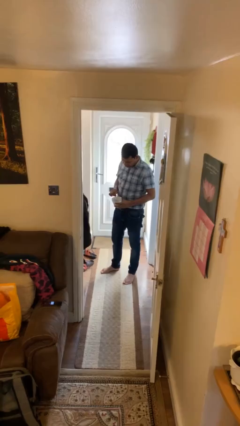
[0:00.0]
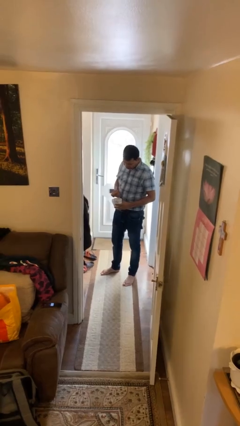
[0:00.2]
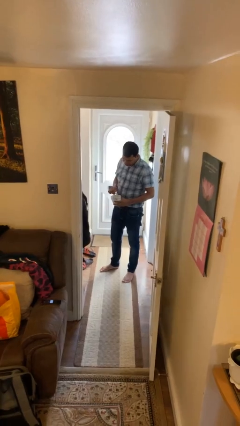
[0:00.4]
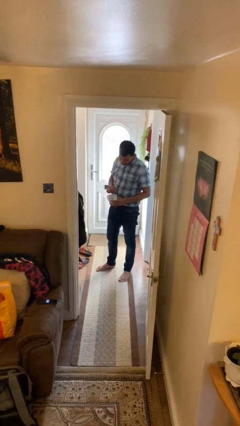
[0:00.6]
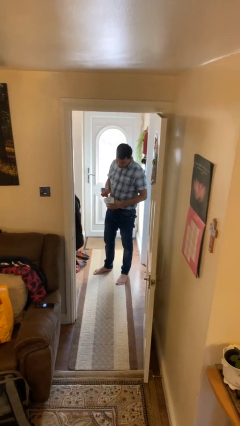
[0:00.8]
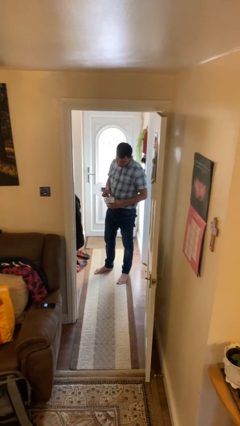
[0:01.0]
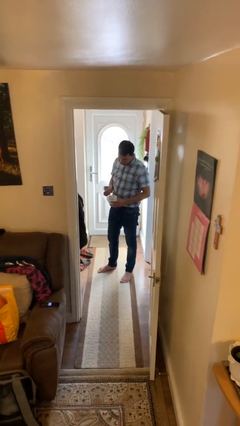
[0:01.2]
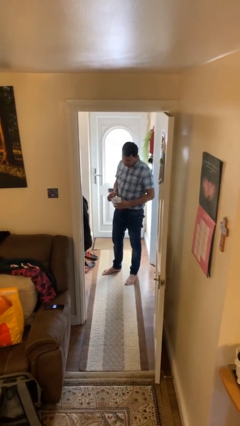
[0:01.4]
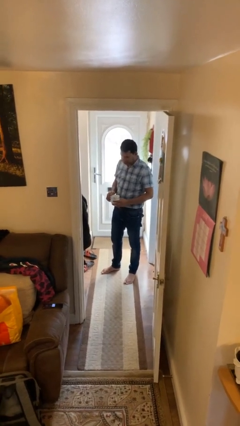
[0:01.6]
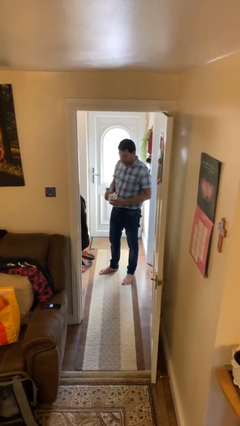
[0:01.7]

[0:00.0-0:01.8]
person stirs mug

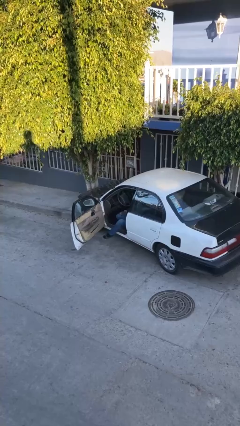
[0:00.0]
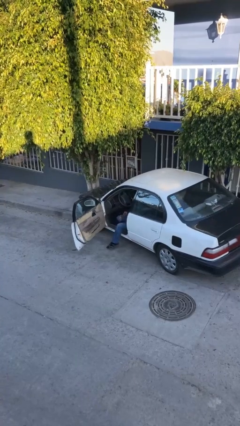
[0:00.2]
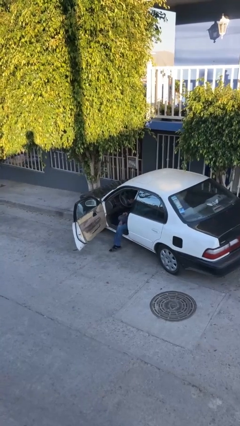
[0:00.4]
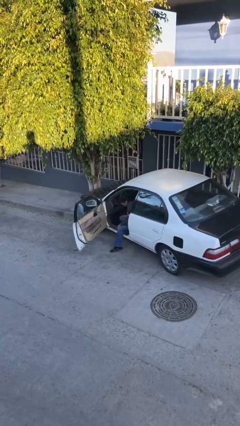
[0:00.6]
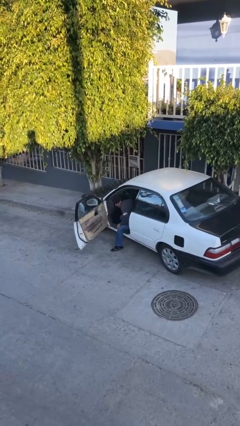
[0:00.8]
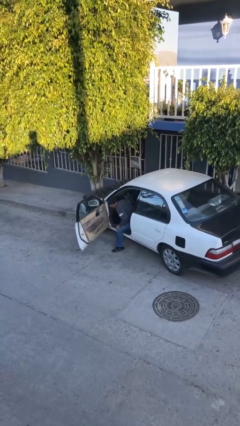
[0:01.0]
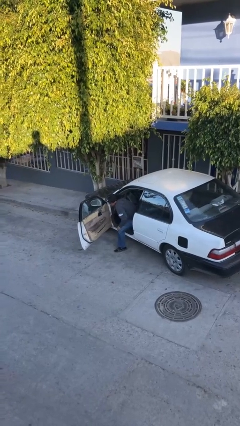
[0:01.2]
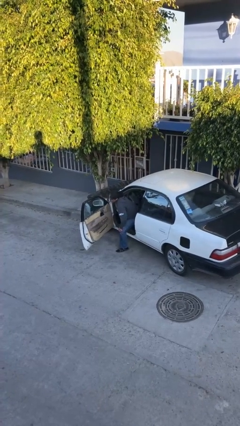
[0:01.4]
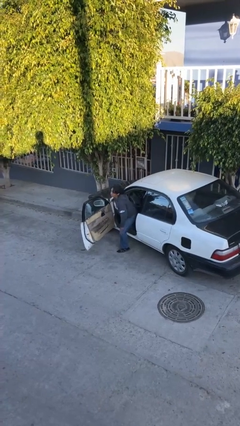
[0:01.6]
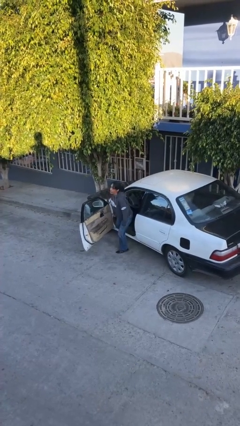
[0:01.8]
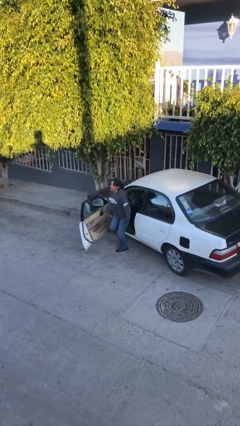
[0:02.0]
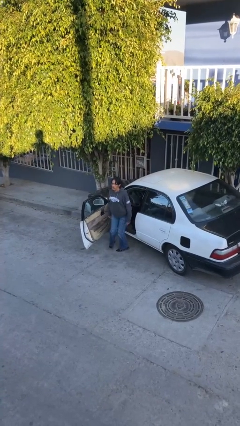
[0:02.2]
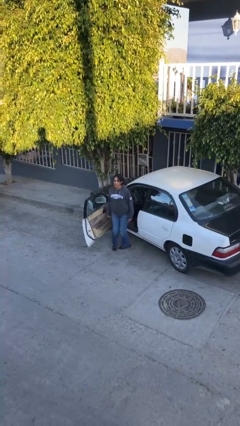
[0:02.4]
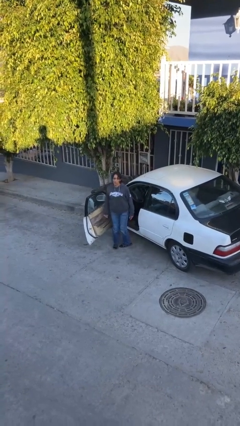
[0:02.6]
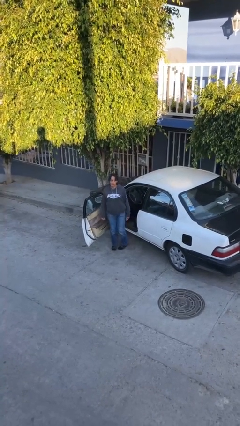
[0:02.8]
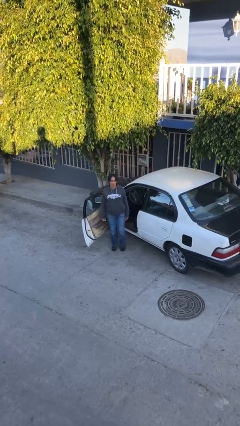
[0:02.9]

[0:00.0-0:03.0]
person exits car

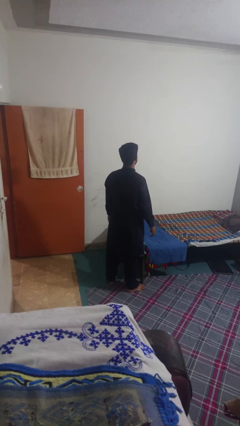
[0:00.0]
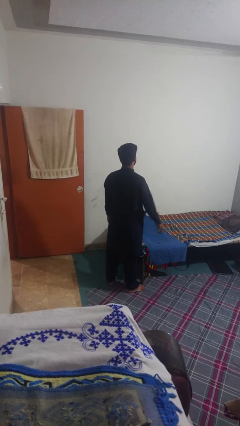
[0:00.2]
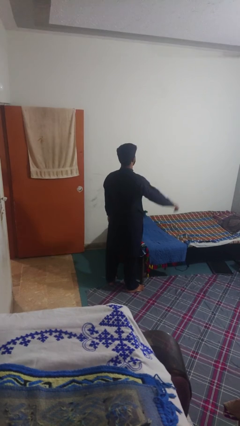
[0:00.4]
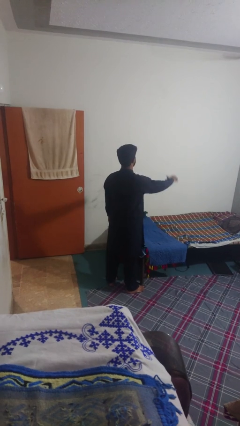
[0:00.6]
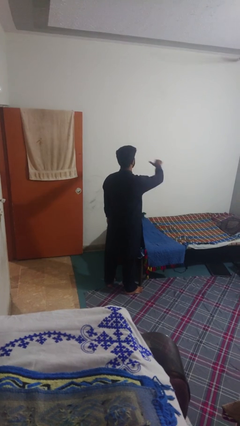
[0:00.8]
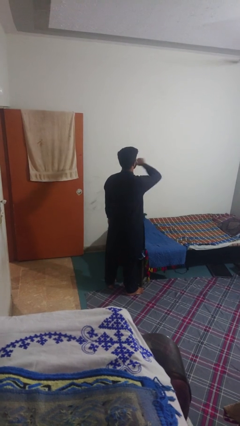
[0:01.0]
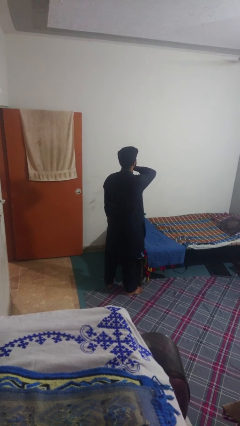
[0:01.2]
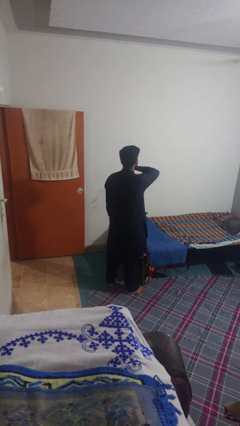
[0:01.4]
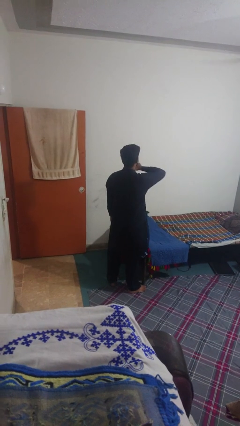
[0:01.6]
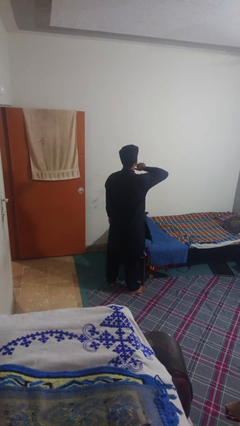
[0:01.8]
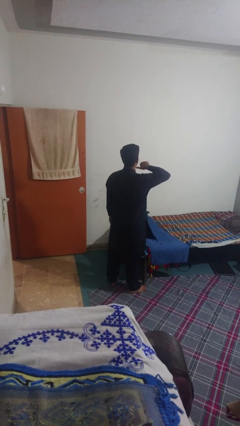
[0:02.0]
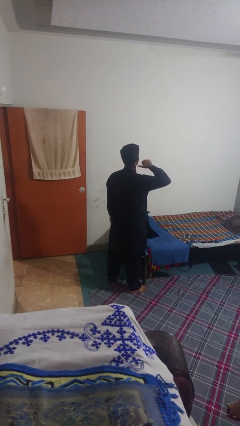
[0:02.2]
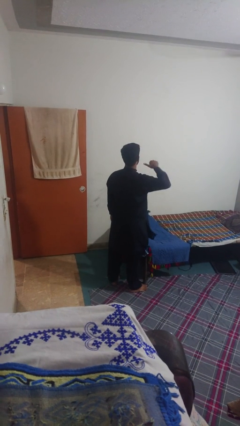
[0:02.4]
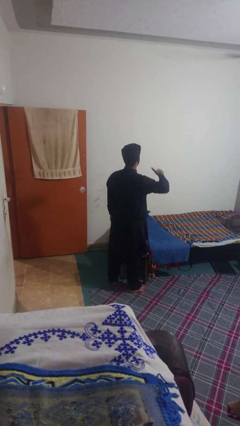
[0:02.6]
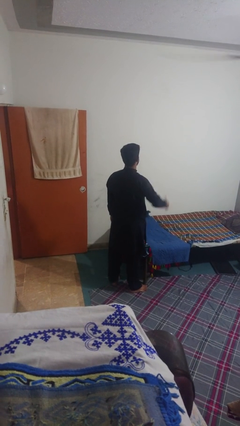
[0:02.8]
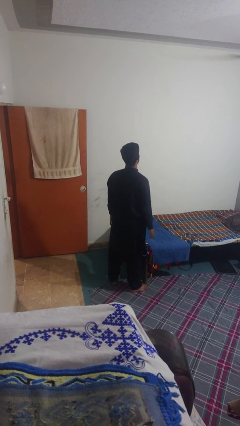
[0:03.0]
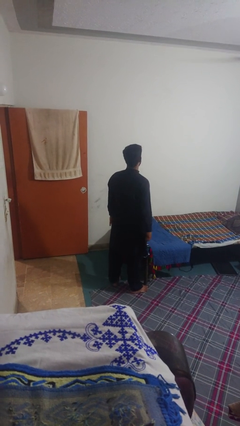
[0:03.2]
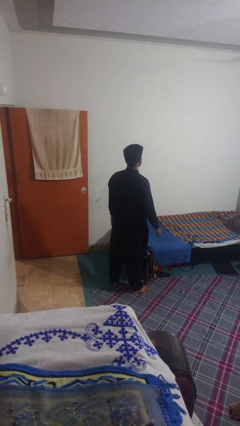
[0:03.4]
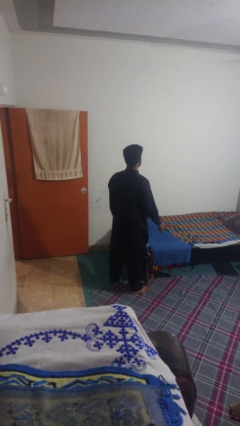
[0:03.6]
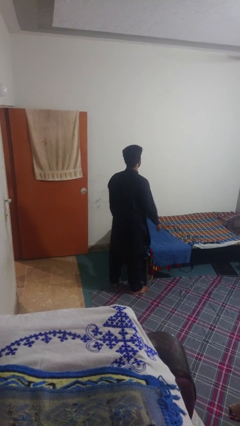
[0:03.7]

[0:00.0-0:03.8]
person gestures cut

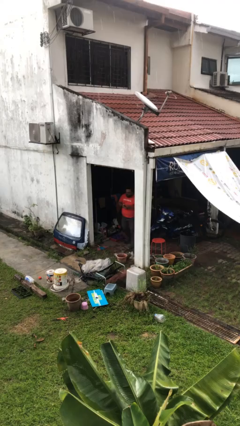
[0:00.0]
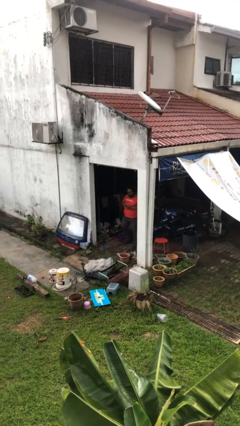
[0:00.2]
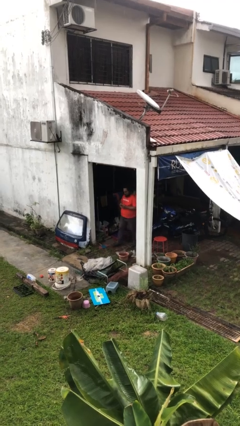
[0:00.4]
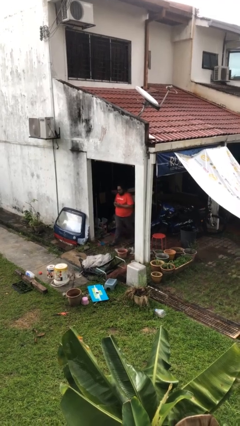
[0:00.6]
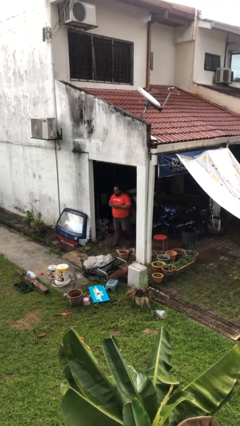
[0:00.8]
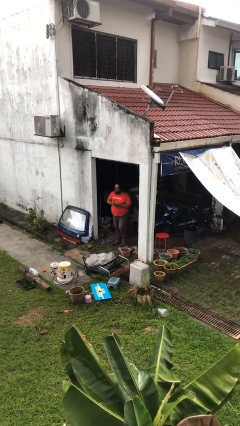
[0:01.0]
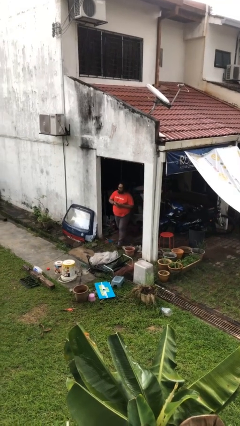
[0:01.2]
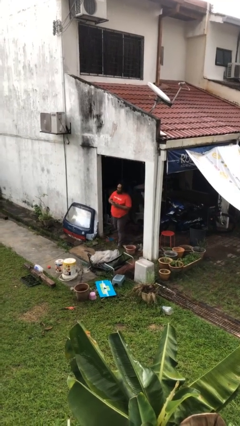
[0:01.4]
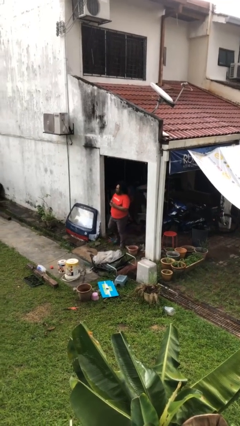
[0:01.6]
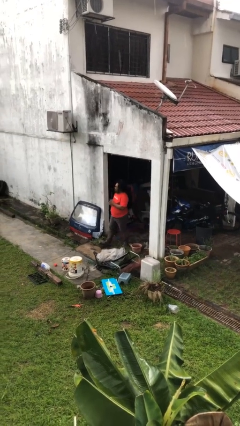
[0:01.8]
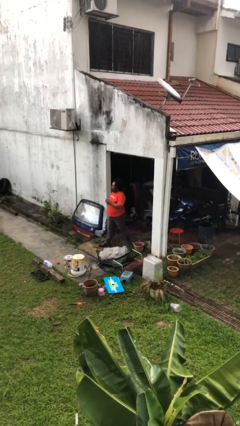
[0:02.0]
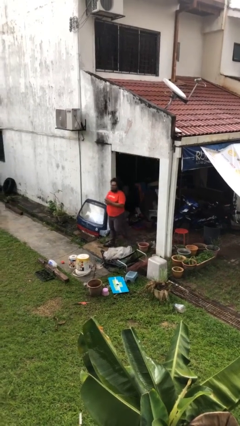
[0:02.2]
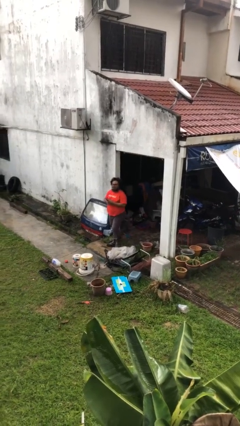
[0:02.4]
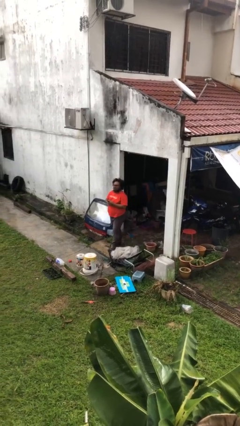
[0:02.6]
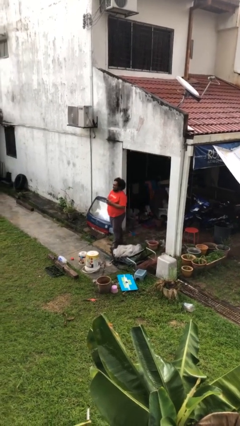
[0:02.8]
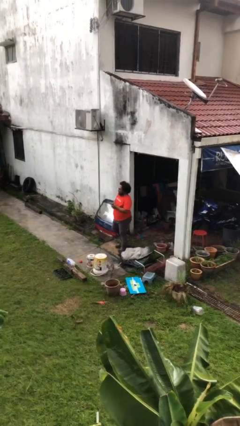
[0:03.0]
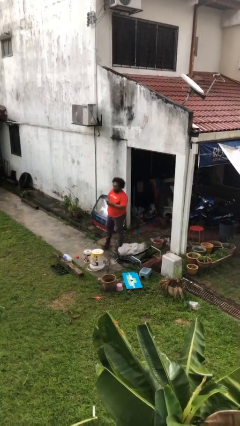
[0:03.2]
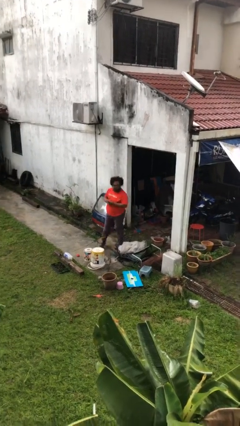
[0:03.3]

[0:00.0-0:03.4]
person enters scene through structure

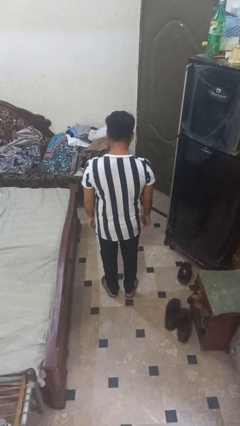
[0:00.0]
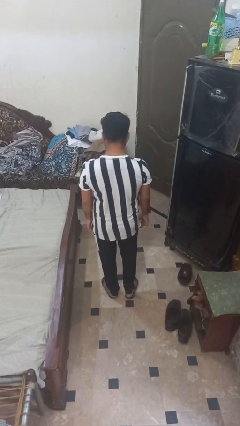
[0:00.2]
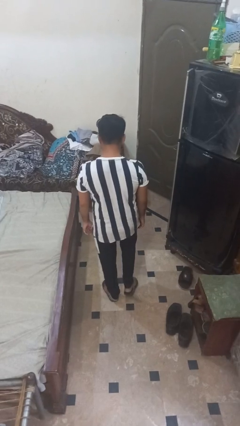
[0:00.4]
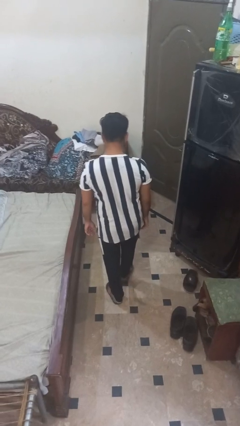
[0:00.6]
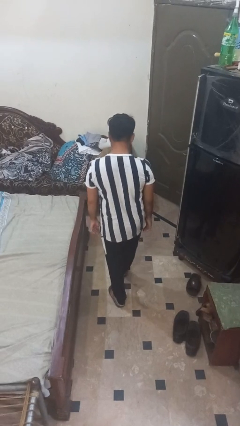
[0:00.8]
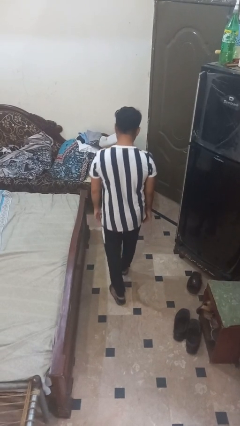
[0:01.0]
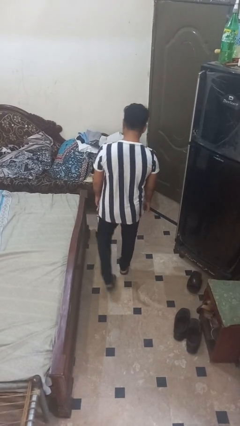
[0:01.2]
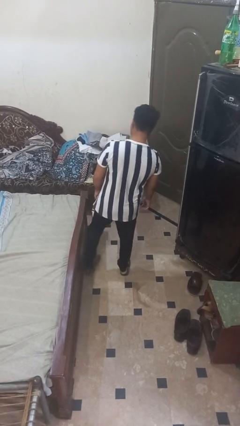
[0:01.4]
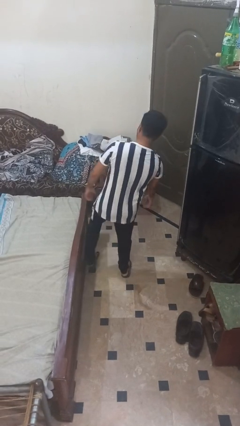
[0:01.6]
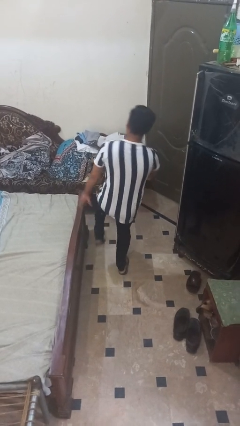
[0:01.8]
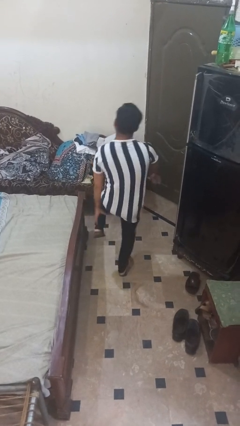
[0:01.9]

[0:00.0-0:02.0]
person stubs toe

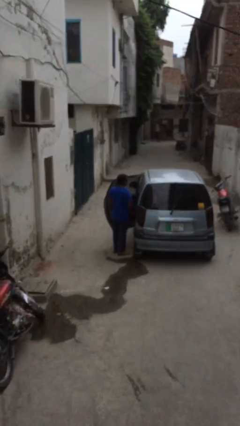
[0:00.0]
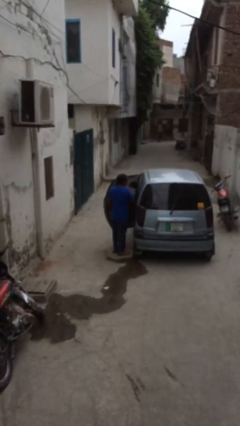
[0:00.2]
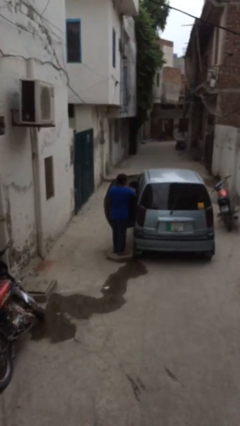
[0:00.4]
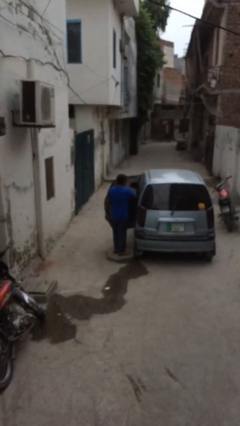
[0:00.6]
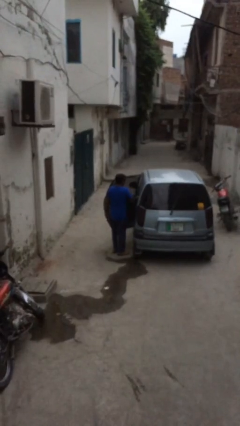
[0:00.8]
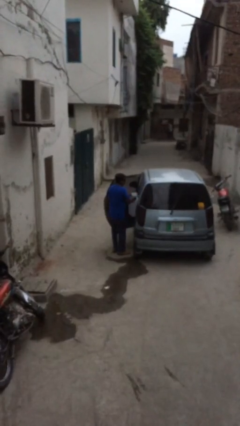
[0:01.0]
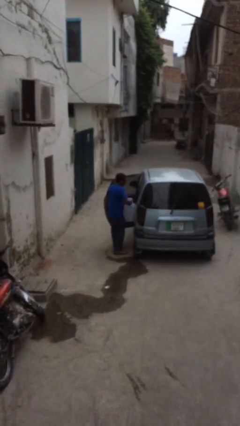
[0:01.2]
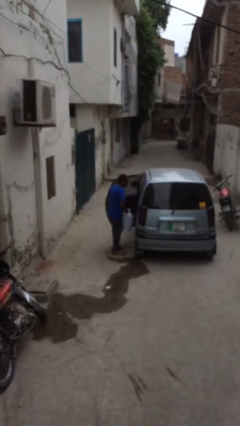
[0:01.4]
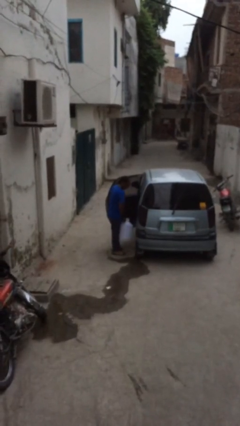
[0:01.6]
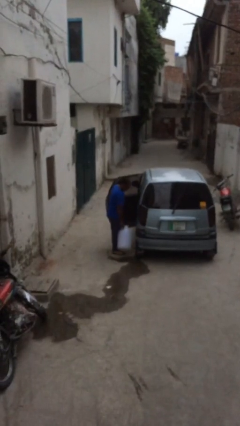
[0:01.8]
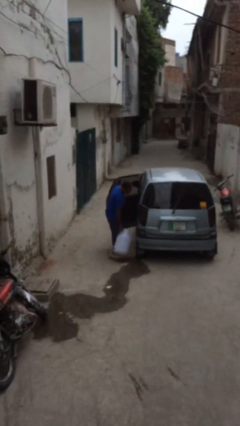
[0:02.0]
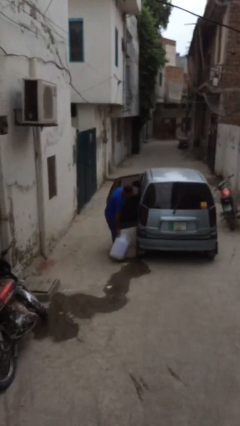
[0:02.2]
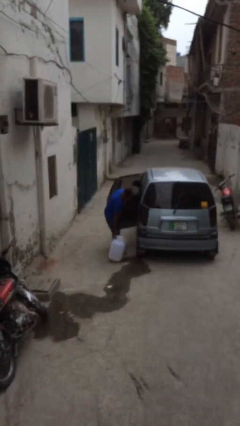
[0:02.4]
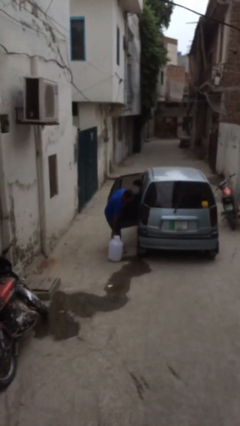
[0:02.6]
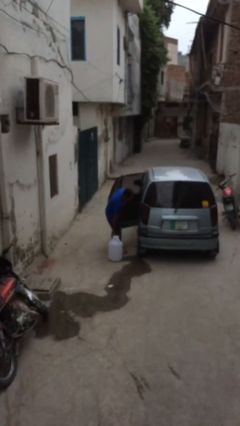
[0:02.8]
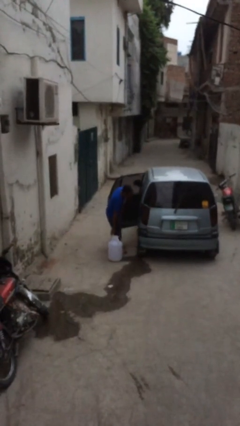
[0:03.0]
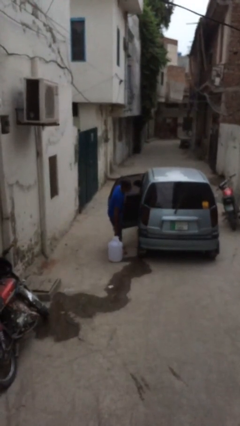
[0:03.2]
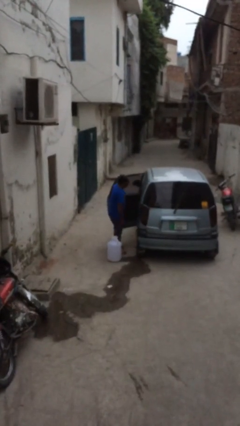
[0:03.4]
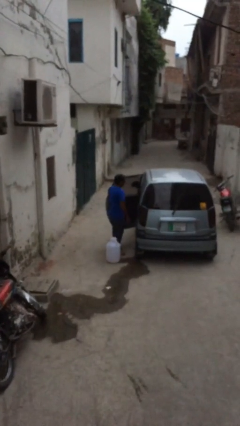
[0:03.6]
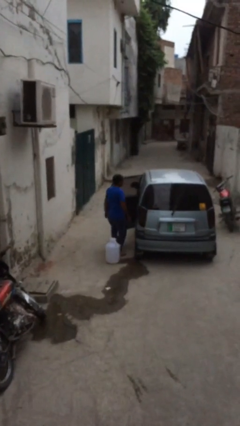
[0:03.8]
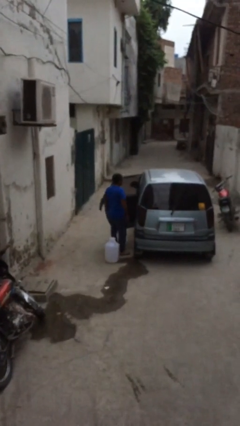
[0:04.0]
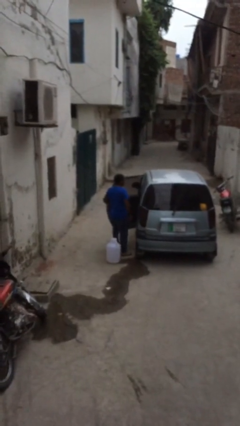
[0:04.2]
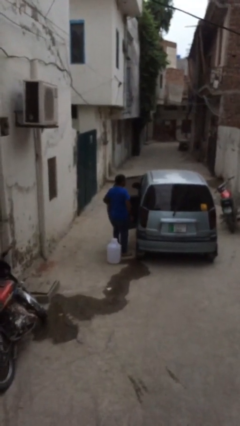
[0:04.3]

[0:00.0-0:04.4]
person unloads car
